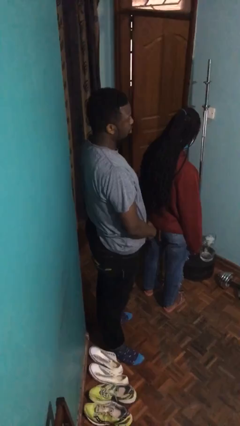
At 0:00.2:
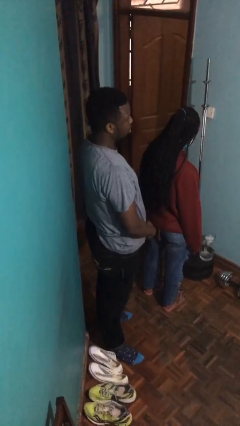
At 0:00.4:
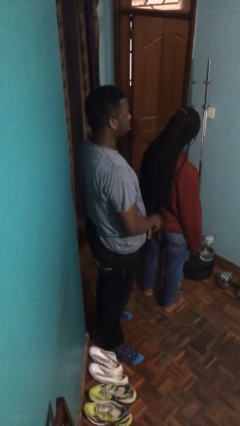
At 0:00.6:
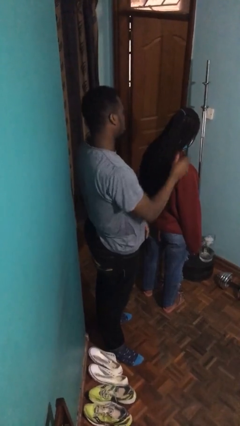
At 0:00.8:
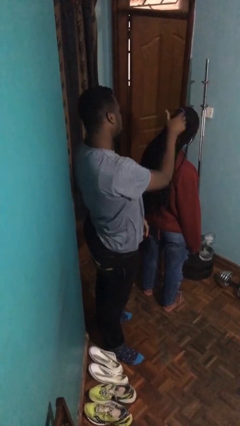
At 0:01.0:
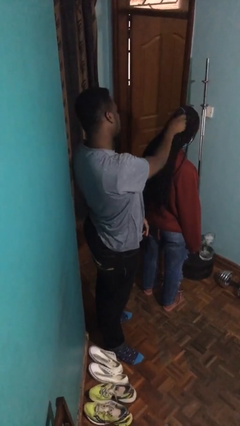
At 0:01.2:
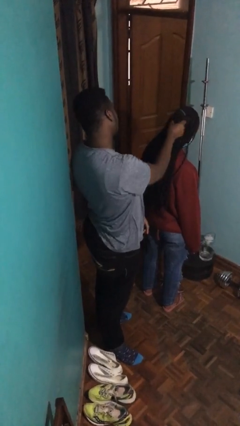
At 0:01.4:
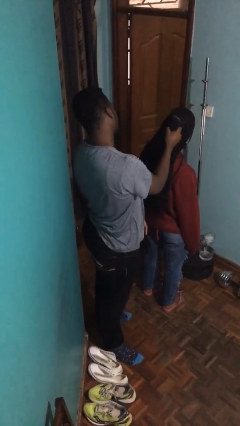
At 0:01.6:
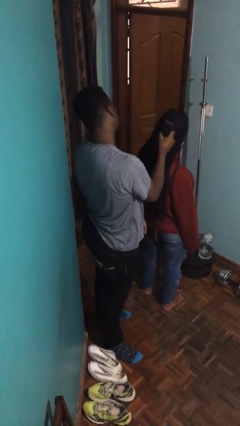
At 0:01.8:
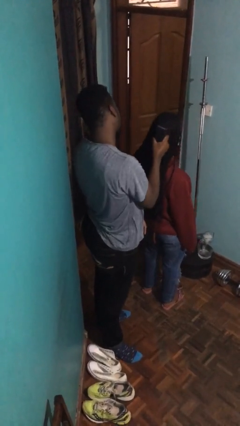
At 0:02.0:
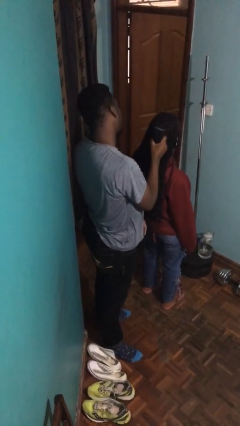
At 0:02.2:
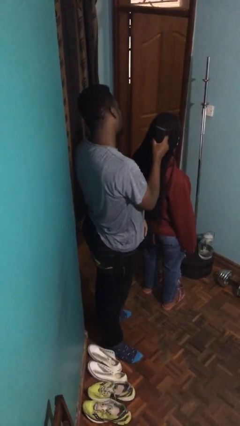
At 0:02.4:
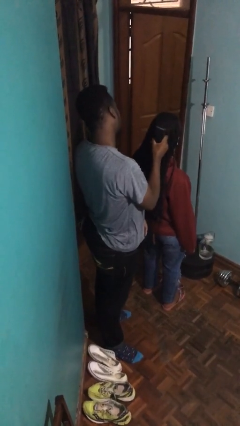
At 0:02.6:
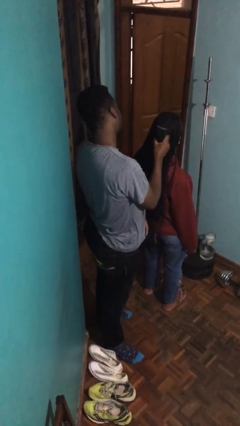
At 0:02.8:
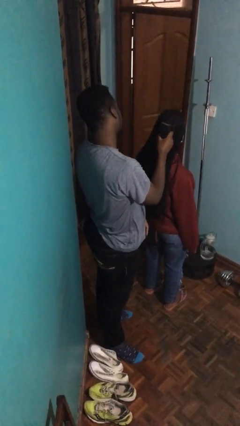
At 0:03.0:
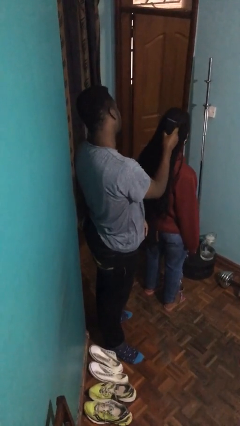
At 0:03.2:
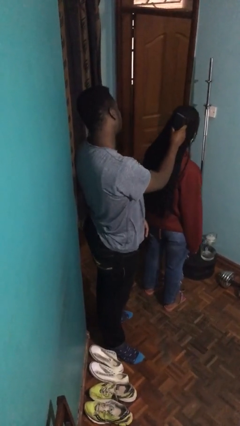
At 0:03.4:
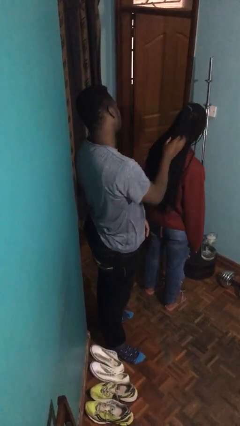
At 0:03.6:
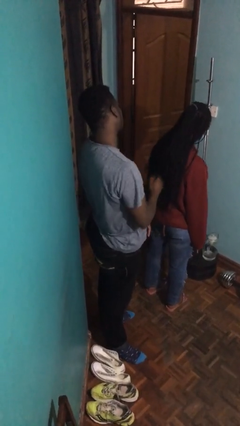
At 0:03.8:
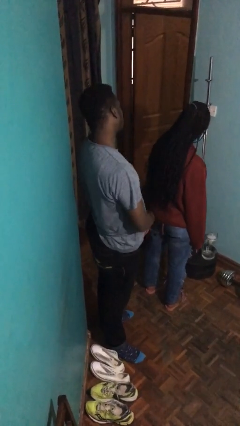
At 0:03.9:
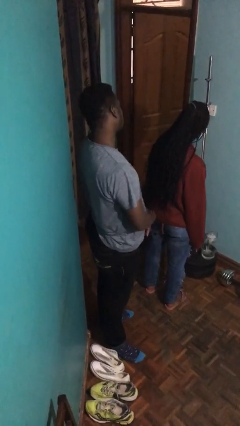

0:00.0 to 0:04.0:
person grabs person by hair

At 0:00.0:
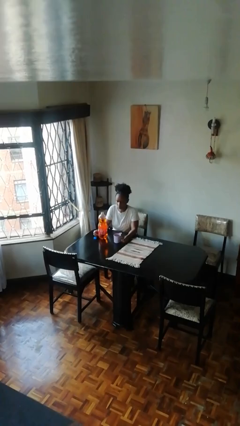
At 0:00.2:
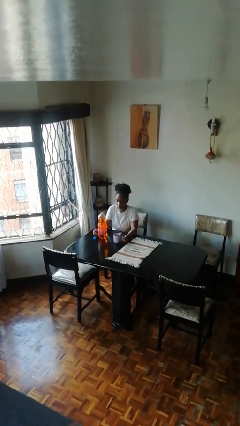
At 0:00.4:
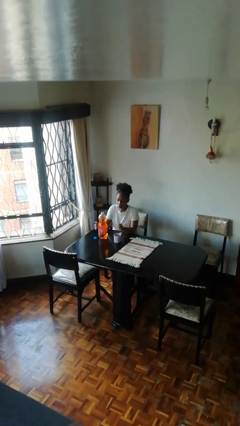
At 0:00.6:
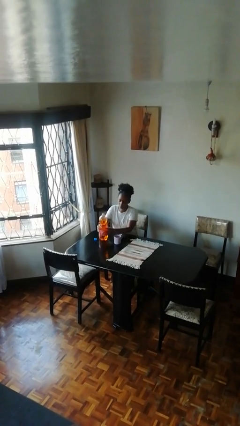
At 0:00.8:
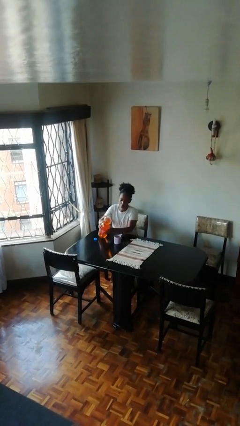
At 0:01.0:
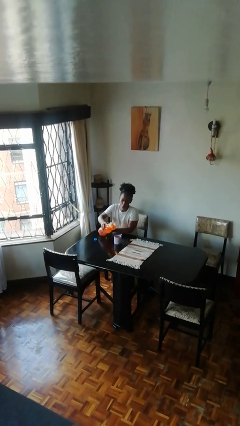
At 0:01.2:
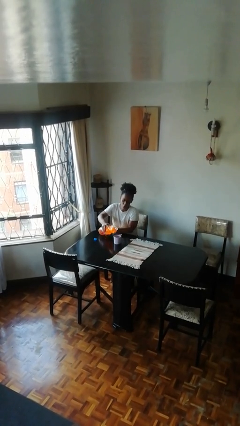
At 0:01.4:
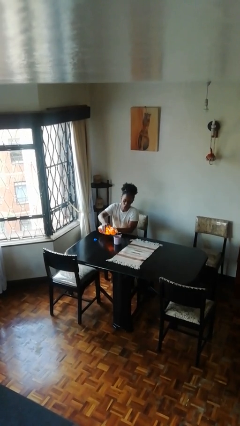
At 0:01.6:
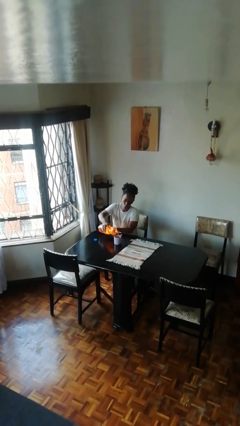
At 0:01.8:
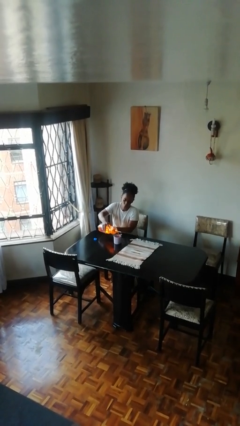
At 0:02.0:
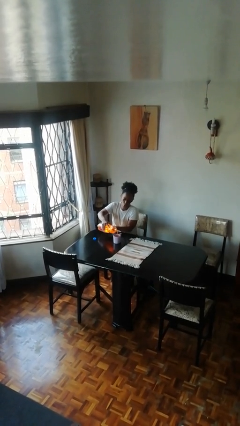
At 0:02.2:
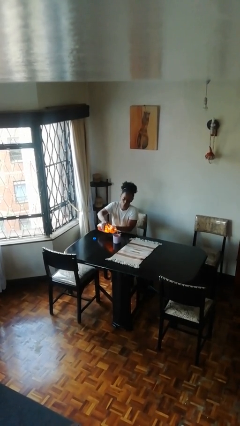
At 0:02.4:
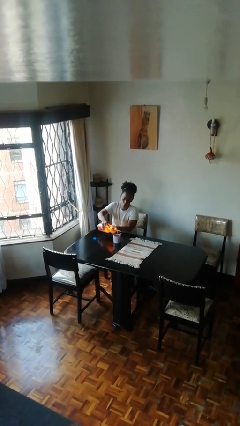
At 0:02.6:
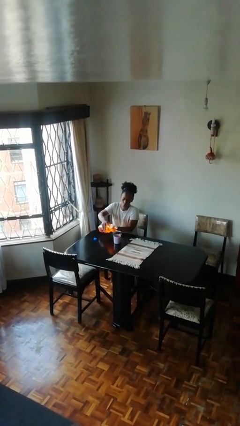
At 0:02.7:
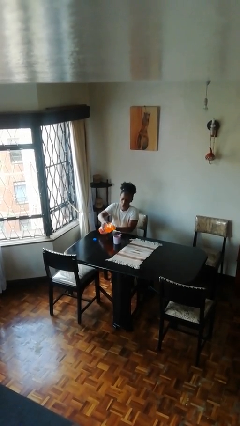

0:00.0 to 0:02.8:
person pours liquid into cup

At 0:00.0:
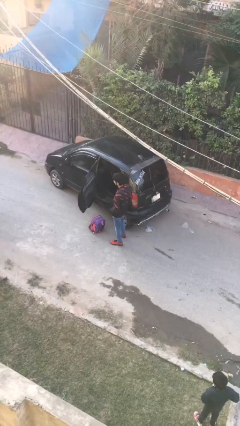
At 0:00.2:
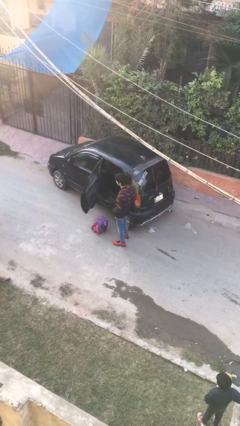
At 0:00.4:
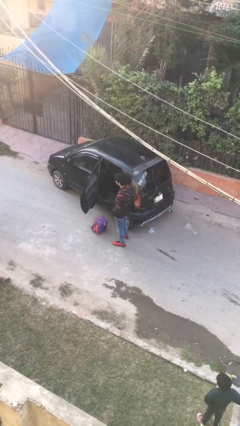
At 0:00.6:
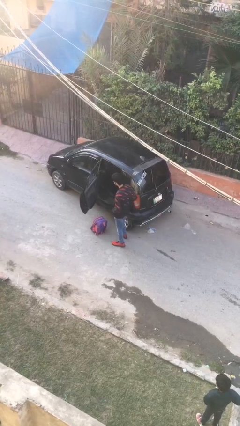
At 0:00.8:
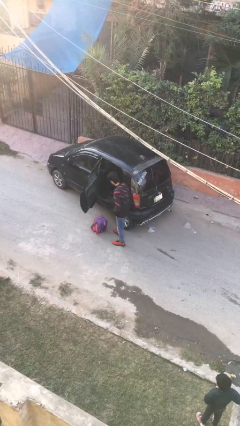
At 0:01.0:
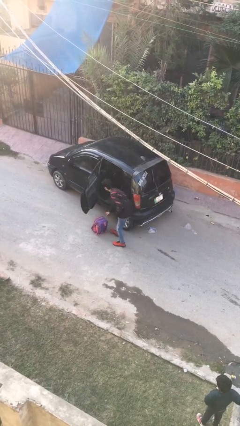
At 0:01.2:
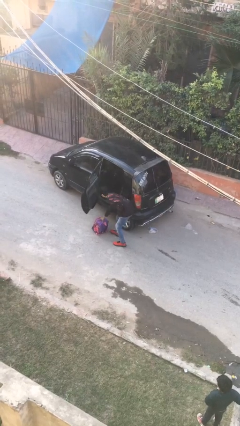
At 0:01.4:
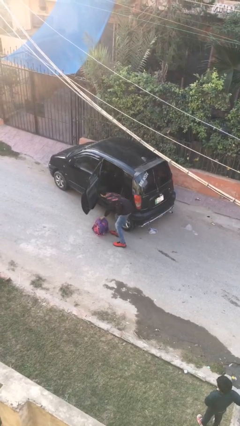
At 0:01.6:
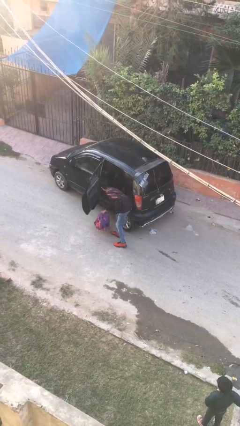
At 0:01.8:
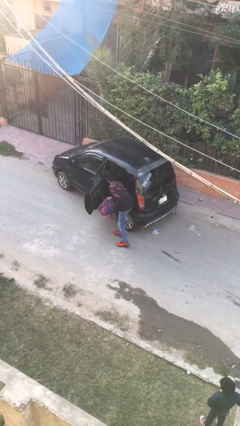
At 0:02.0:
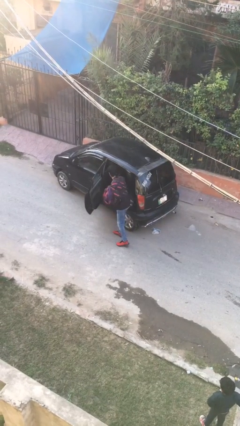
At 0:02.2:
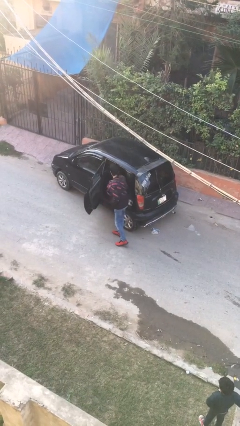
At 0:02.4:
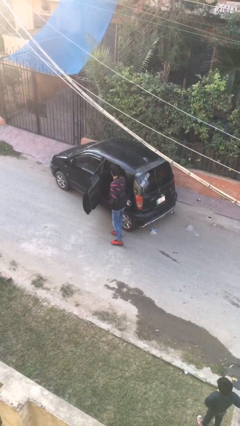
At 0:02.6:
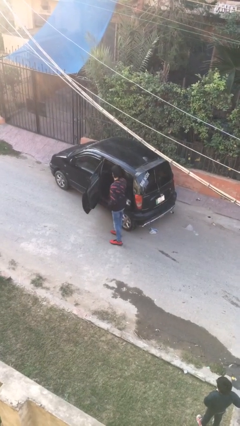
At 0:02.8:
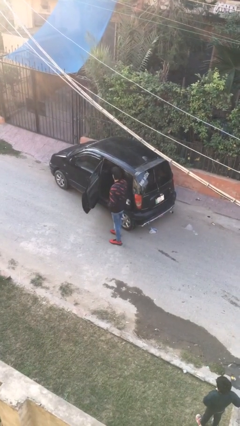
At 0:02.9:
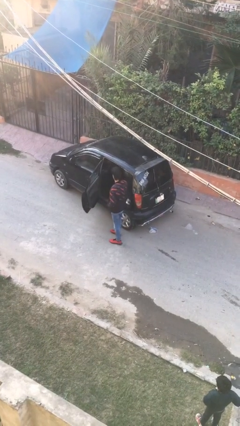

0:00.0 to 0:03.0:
person loads car

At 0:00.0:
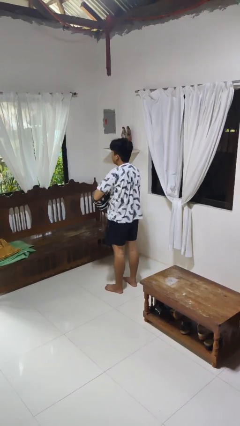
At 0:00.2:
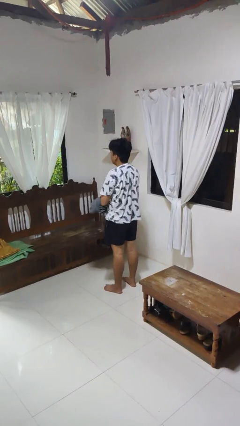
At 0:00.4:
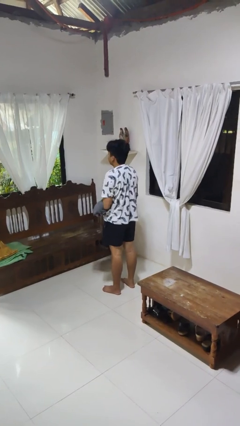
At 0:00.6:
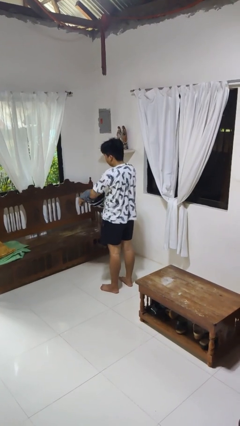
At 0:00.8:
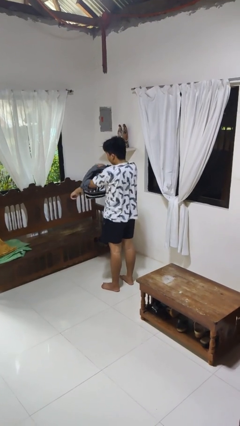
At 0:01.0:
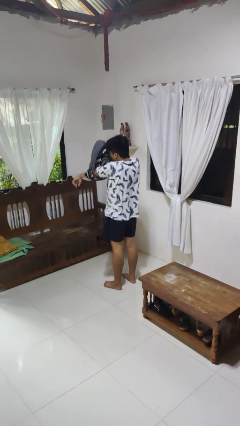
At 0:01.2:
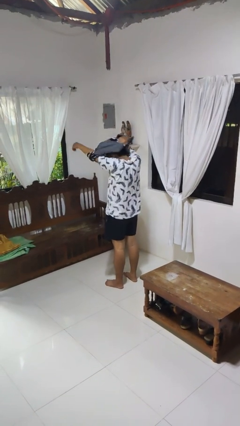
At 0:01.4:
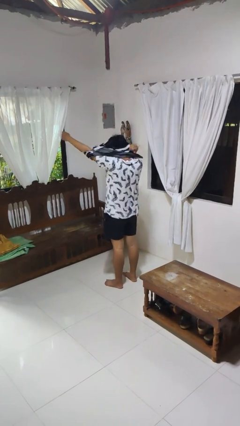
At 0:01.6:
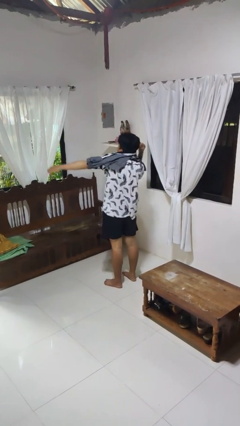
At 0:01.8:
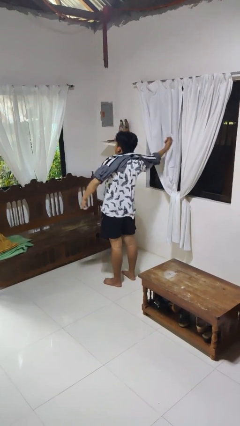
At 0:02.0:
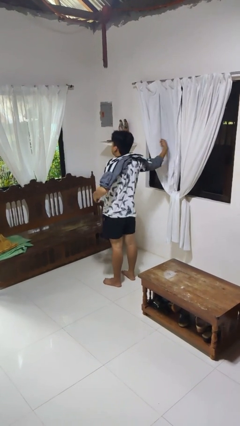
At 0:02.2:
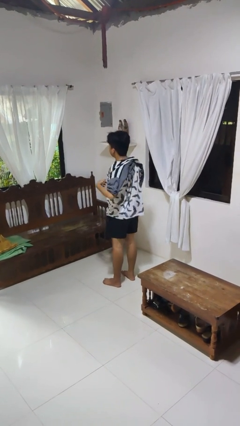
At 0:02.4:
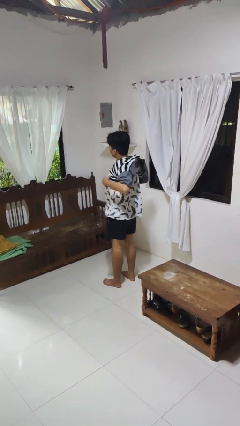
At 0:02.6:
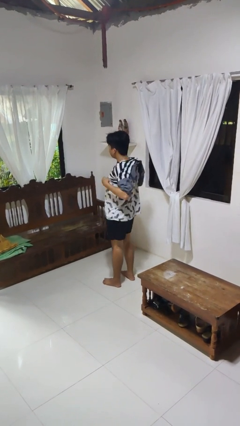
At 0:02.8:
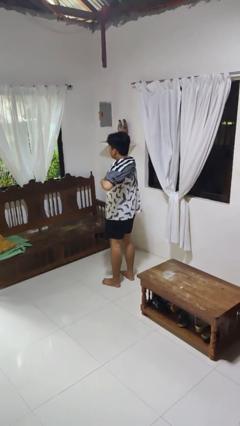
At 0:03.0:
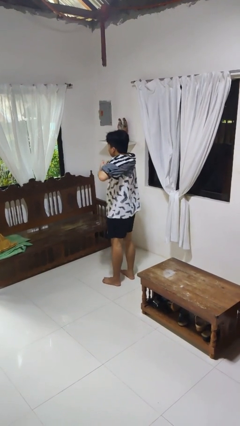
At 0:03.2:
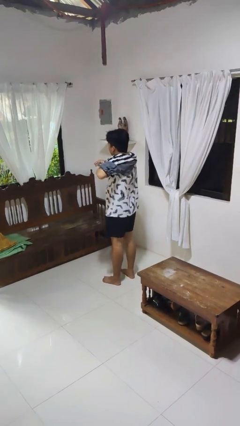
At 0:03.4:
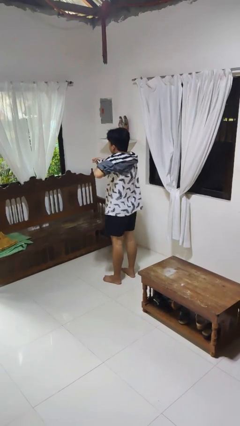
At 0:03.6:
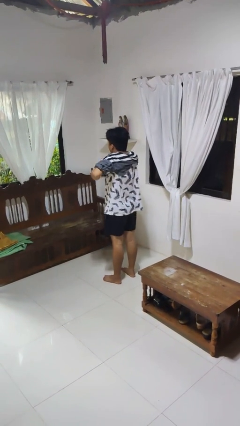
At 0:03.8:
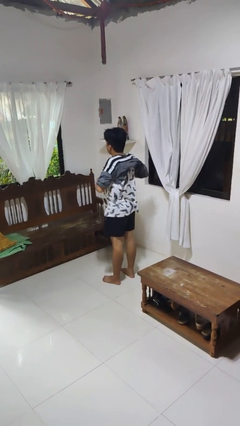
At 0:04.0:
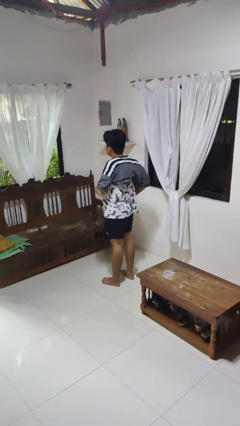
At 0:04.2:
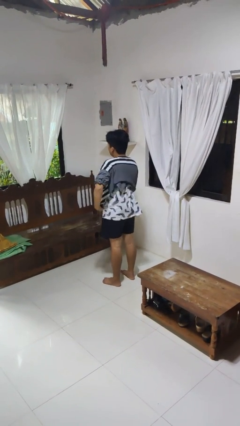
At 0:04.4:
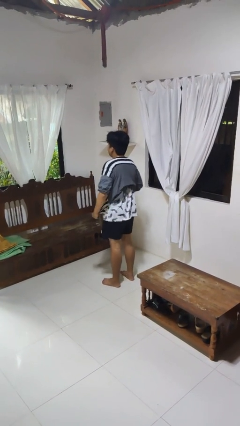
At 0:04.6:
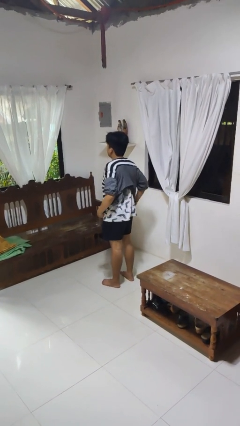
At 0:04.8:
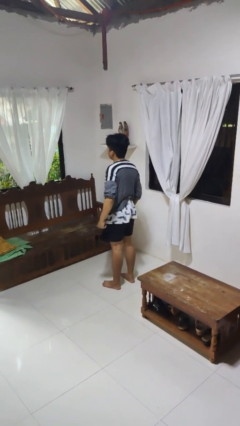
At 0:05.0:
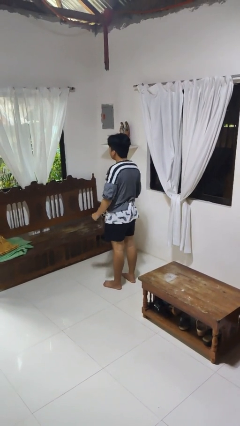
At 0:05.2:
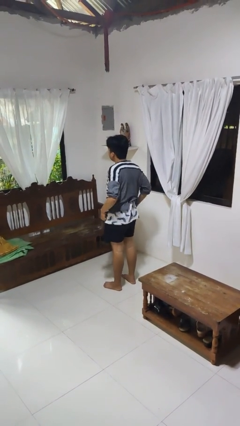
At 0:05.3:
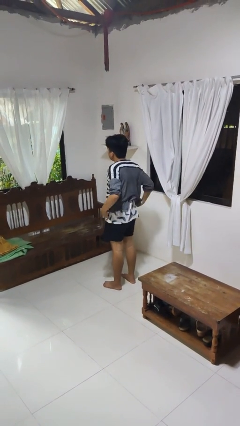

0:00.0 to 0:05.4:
person puts on shirt

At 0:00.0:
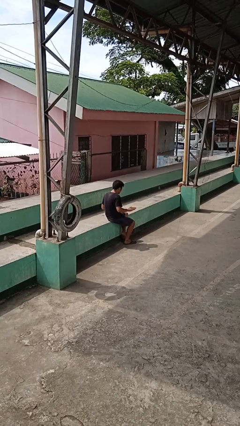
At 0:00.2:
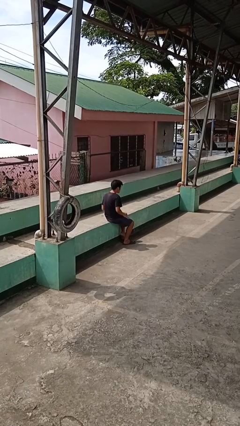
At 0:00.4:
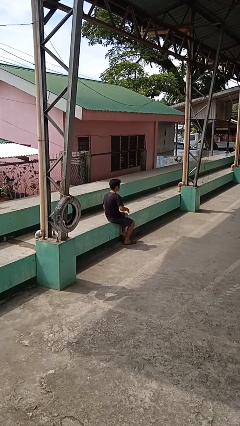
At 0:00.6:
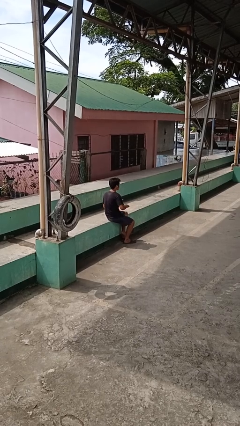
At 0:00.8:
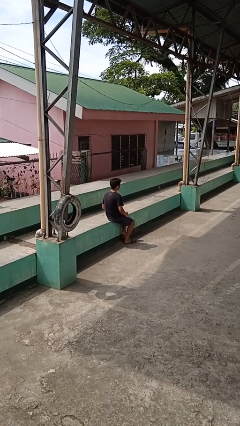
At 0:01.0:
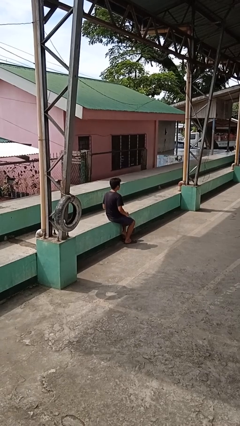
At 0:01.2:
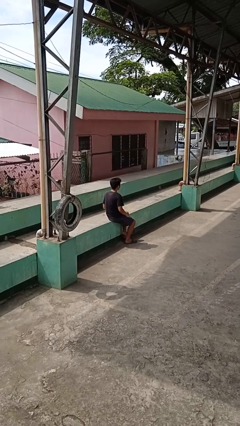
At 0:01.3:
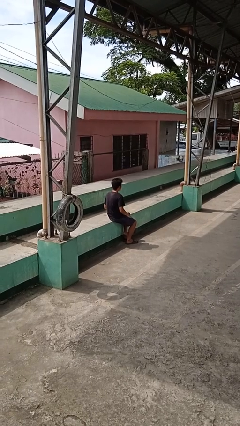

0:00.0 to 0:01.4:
person slaps hands on thighs

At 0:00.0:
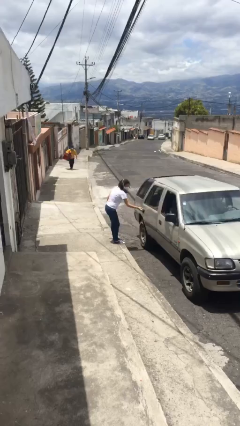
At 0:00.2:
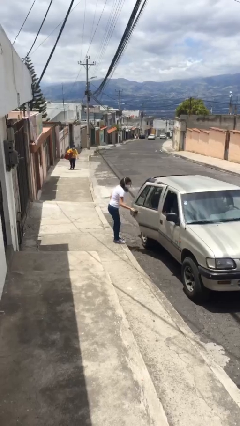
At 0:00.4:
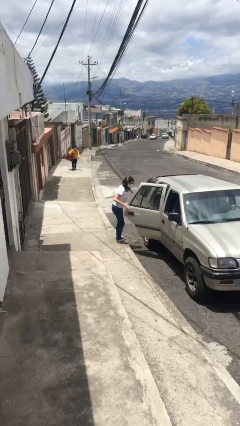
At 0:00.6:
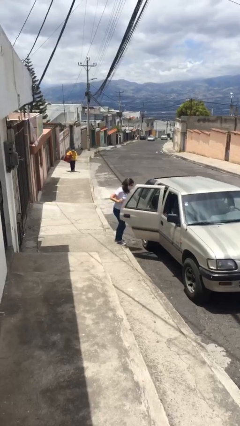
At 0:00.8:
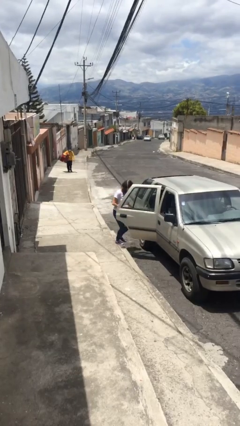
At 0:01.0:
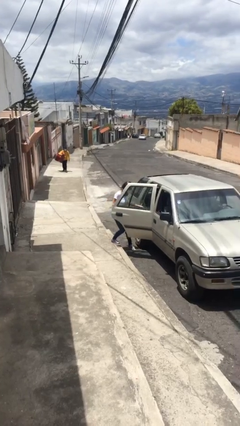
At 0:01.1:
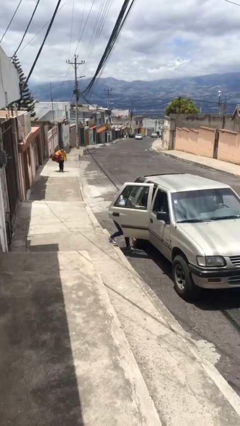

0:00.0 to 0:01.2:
person opens car door
